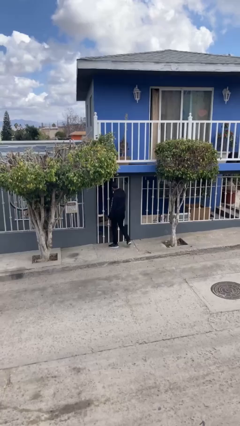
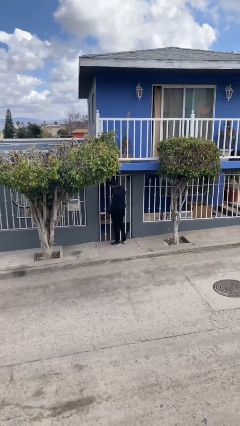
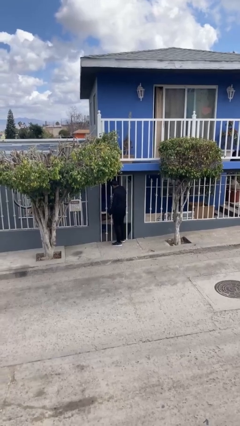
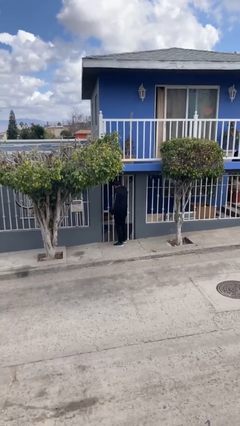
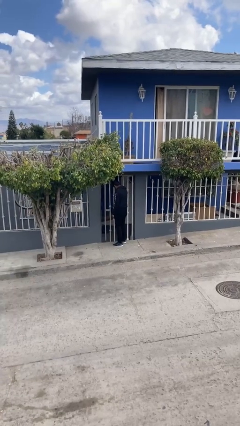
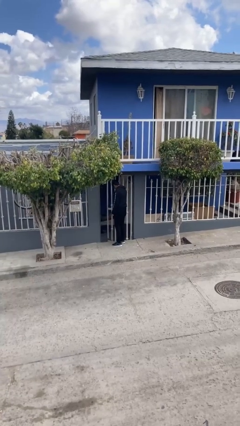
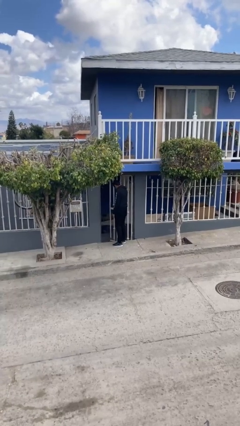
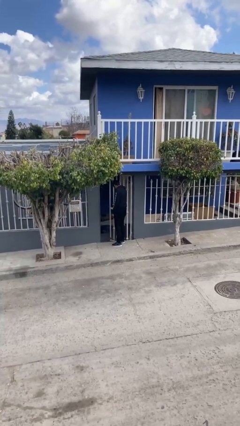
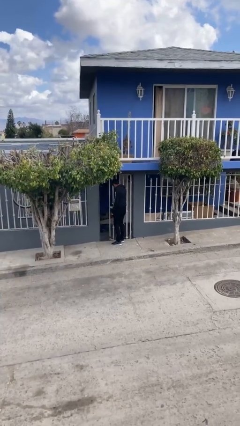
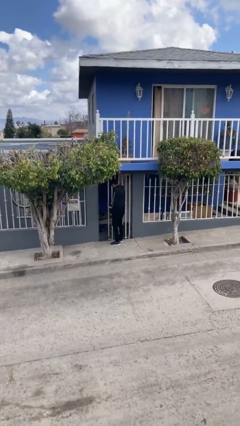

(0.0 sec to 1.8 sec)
person opens facility door

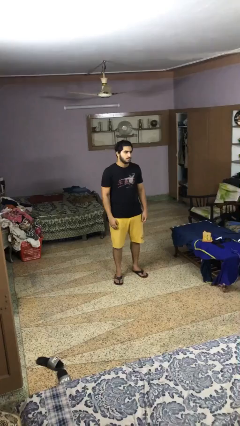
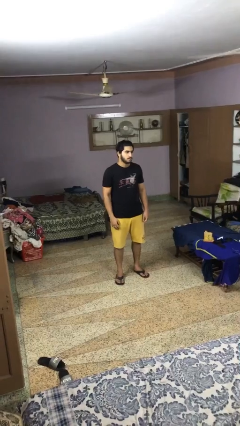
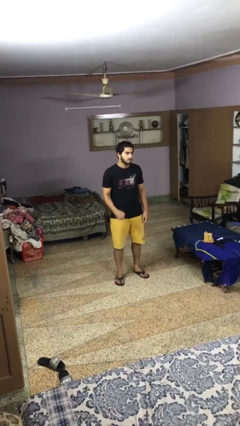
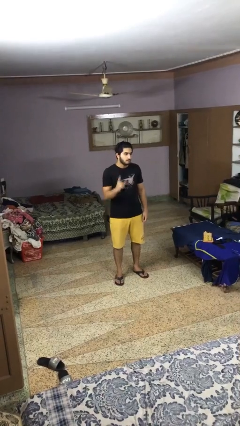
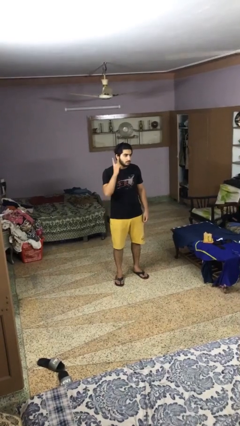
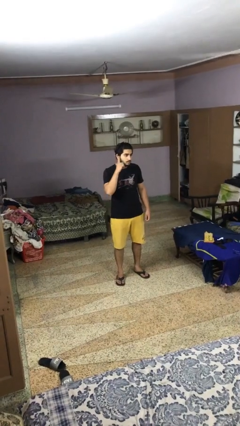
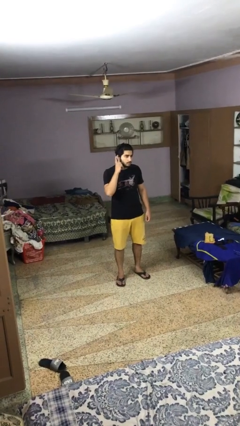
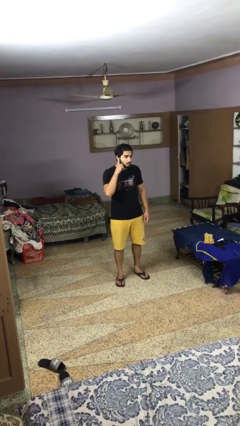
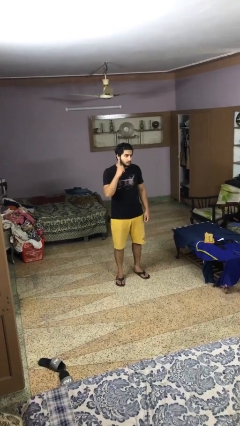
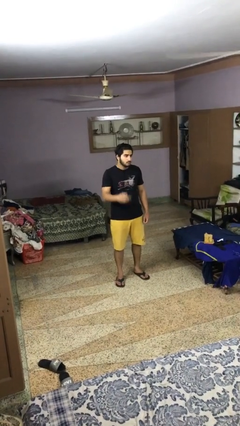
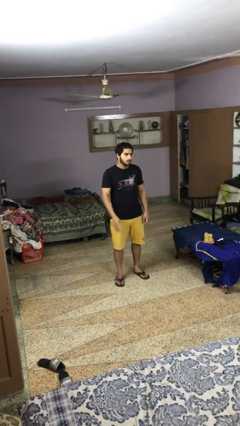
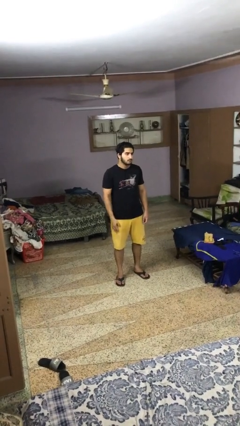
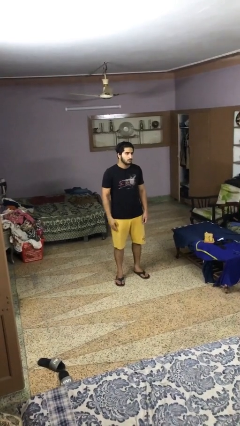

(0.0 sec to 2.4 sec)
person gestures listen closely

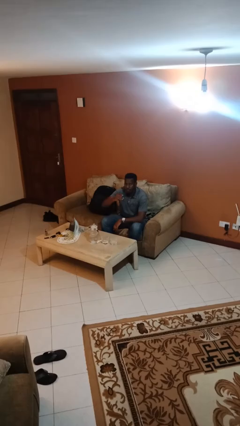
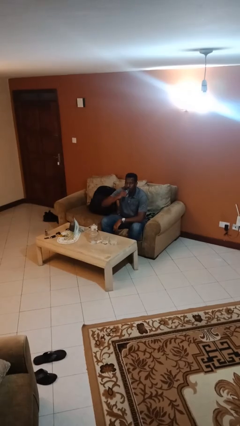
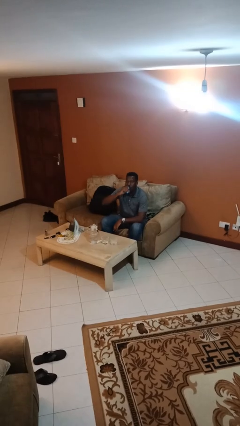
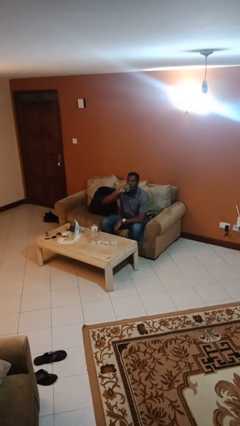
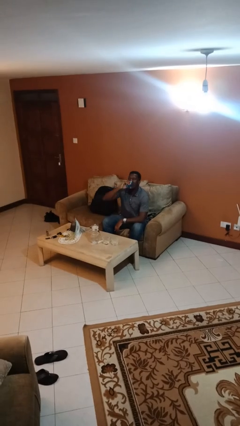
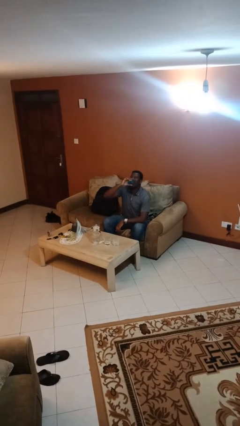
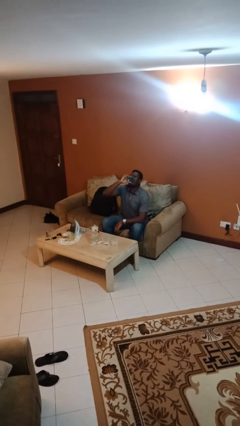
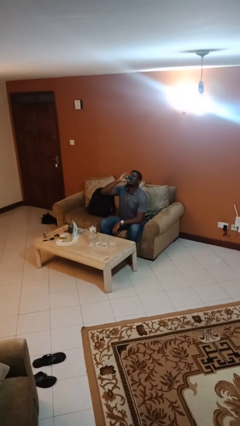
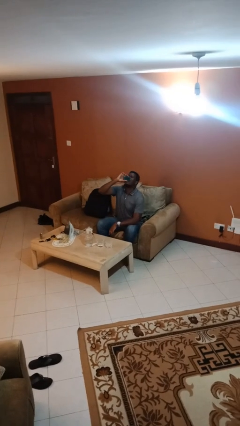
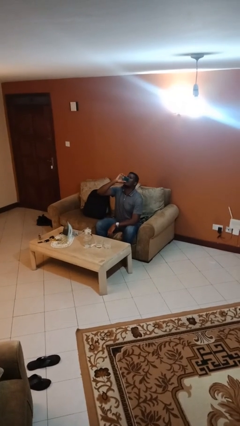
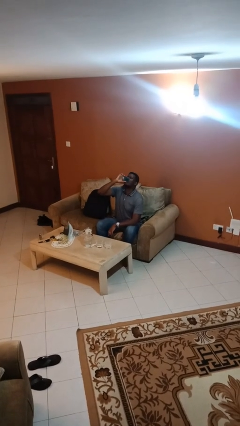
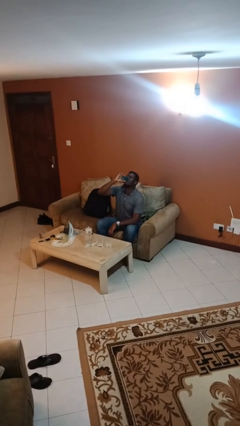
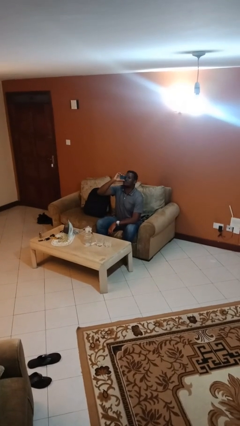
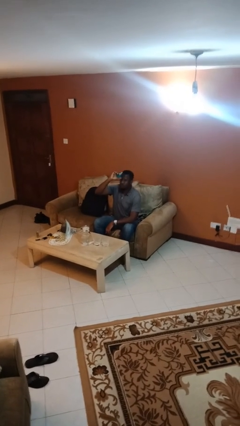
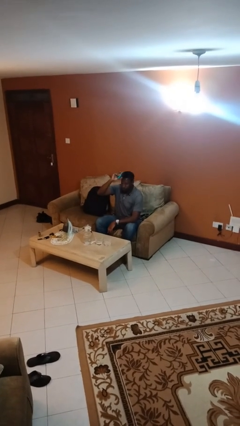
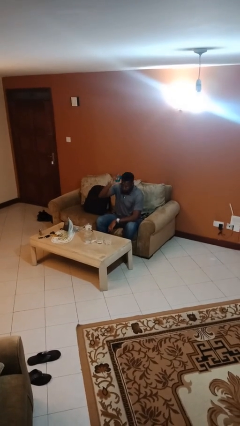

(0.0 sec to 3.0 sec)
person drinks from shotglass

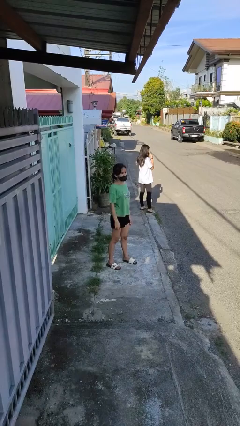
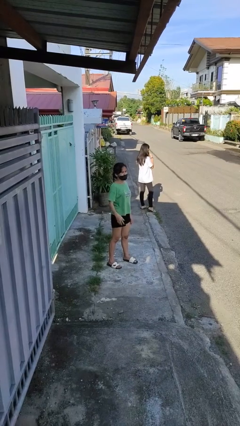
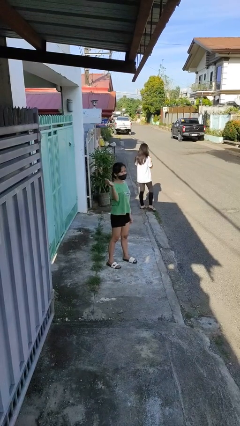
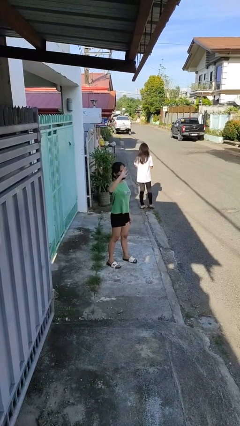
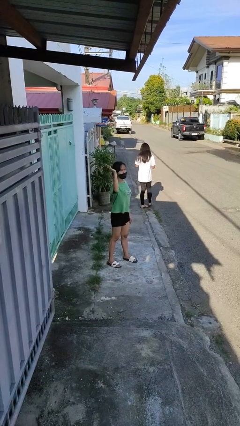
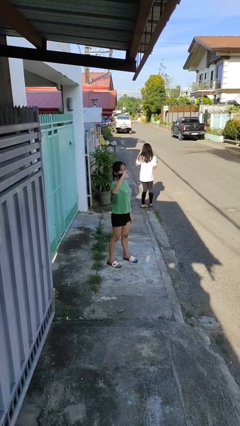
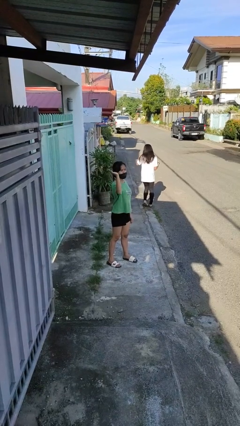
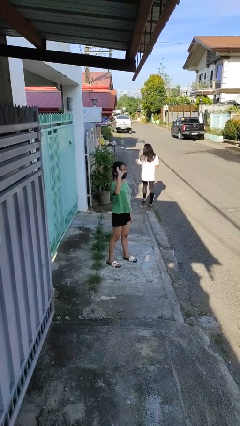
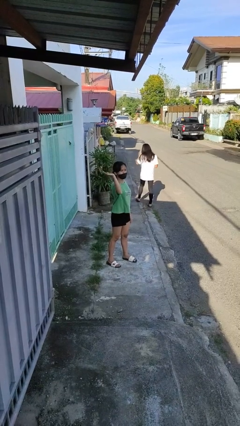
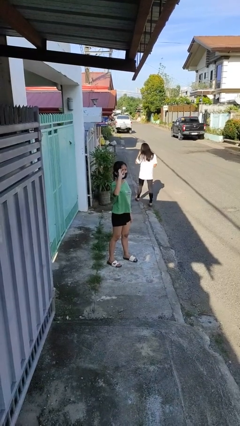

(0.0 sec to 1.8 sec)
person waves at person

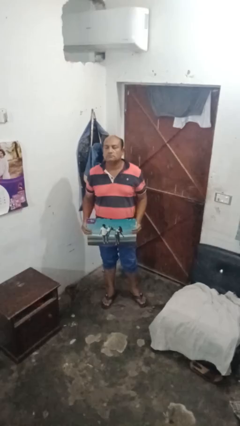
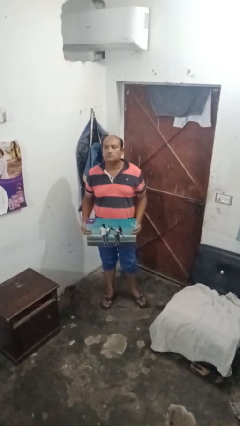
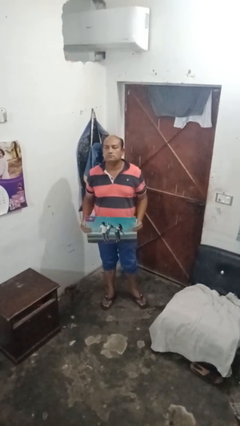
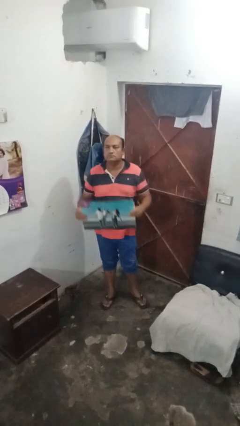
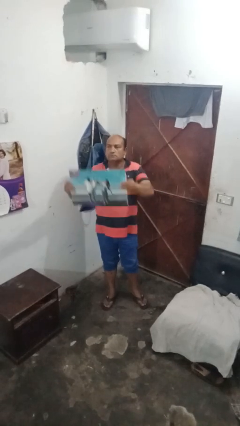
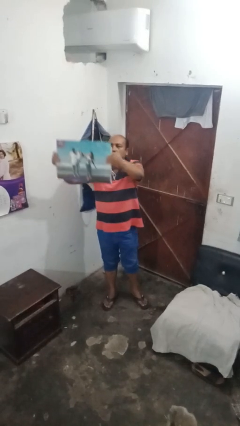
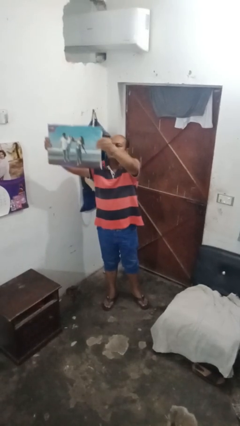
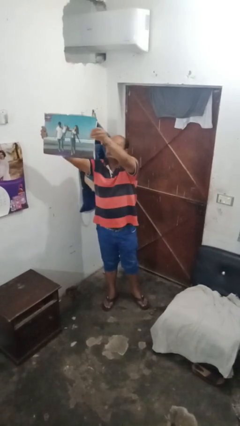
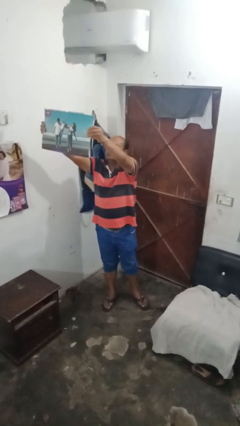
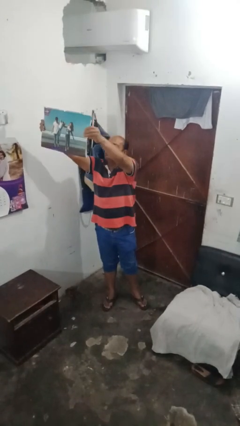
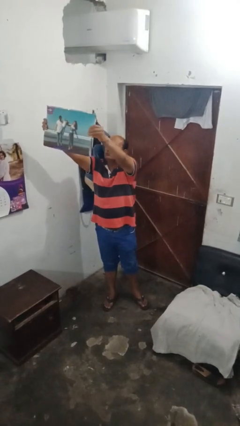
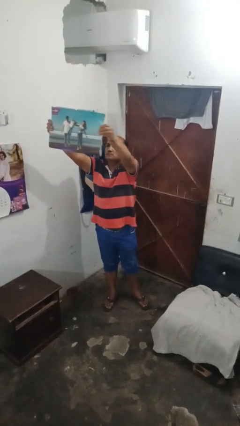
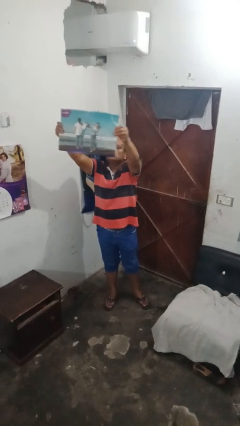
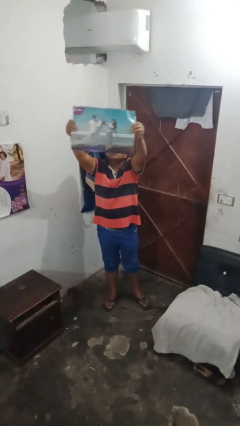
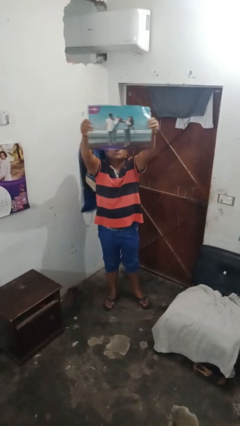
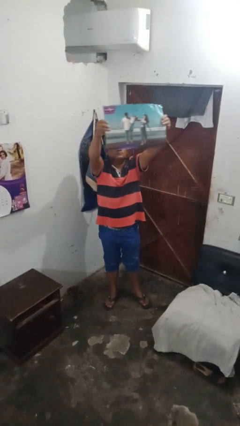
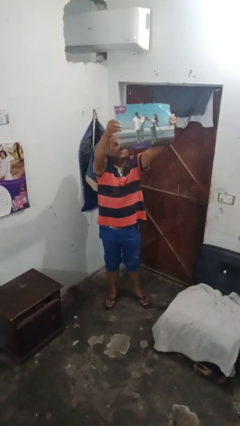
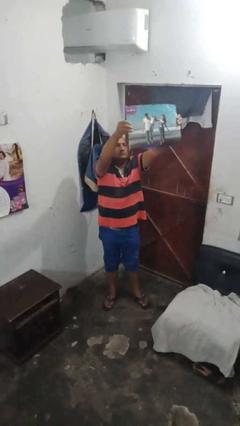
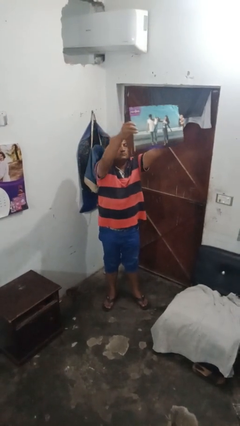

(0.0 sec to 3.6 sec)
person holds object above head

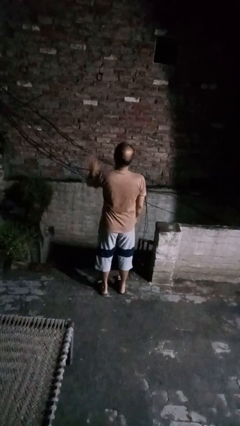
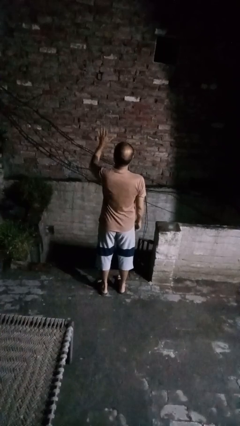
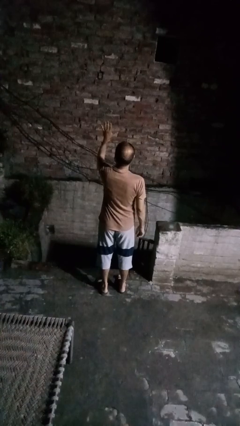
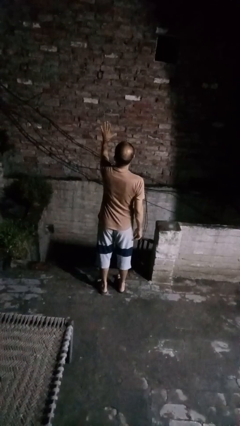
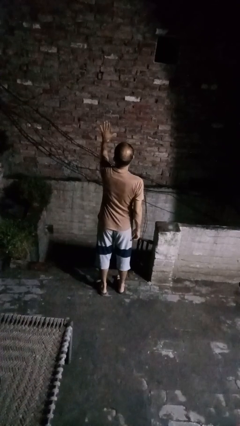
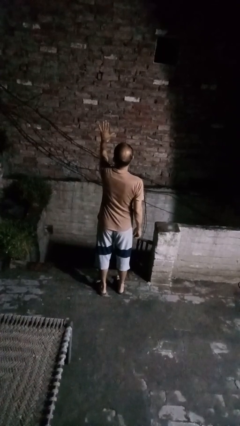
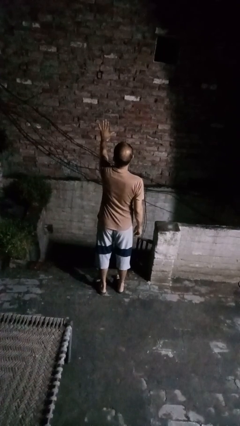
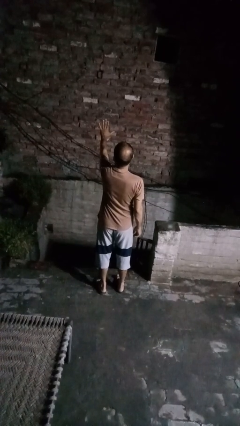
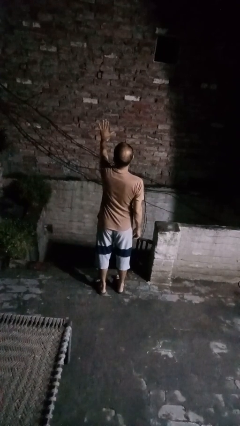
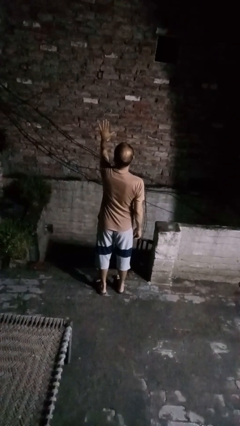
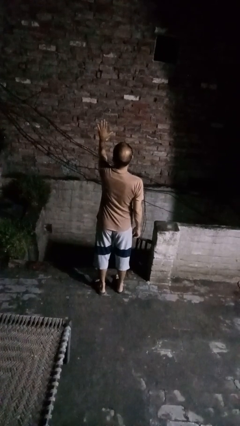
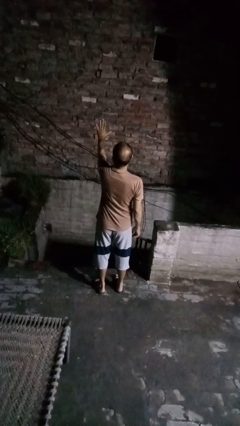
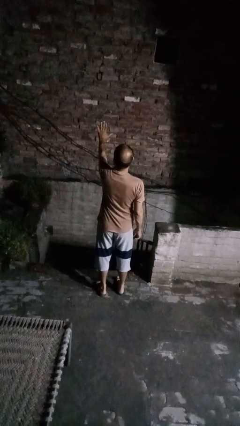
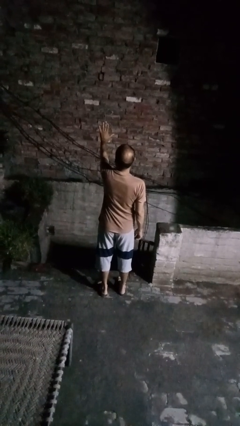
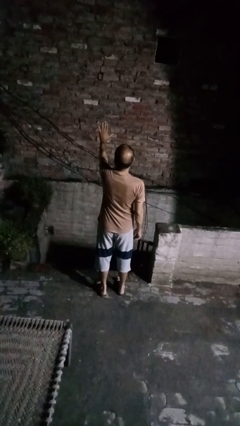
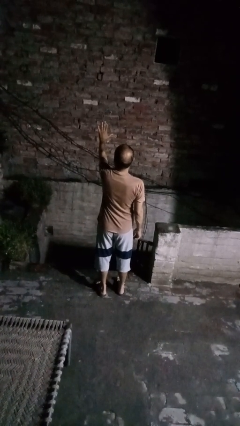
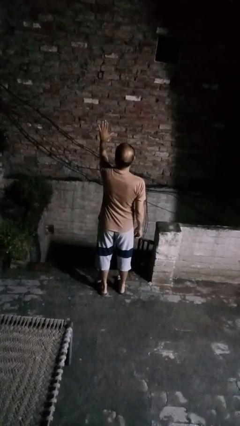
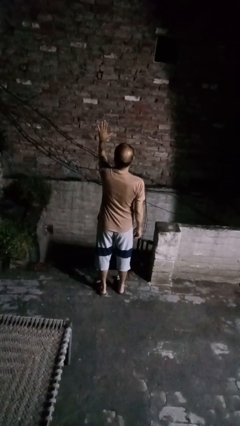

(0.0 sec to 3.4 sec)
person gestures stop

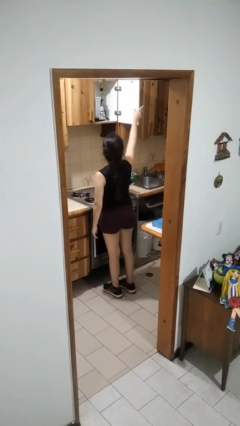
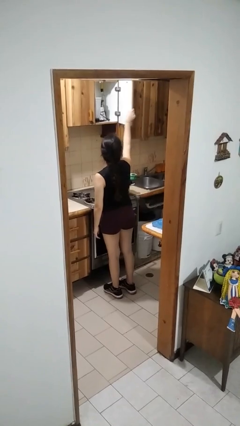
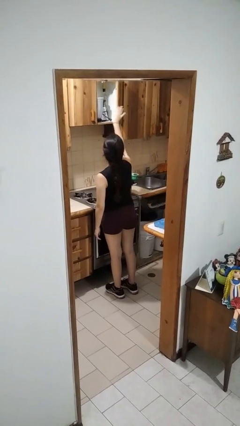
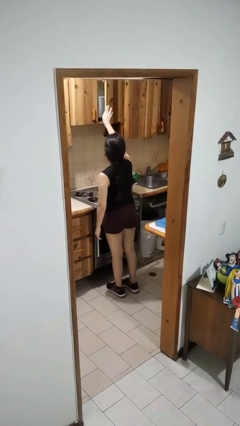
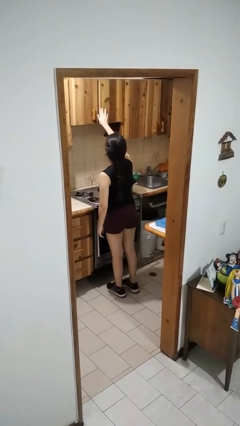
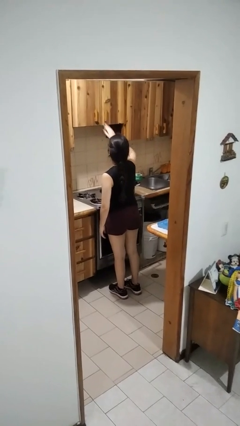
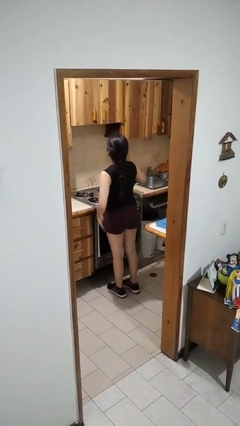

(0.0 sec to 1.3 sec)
person closes cabinet
